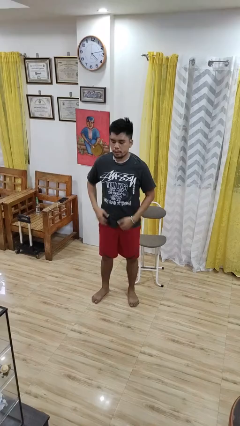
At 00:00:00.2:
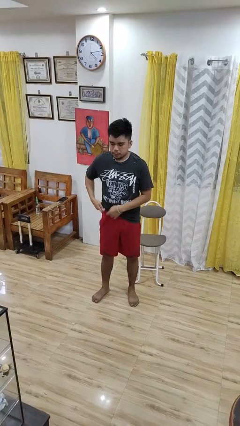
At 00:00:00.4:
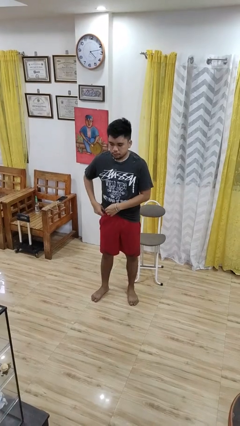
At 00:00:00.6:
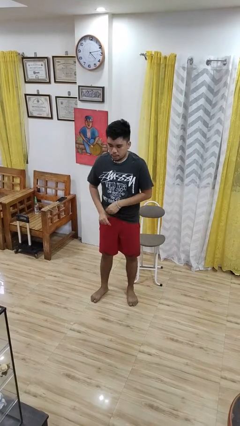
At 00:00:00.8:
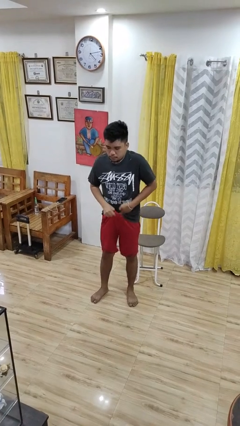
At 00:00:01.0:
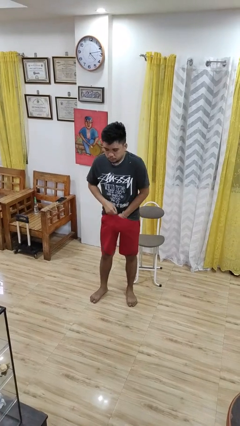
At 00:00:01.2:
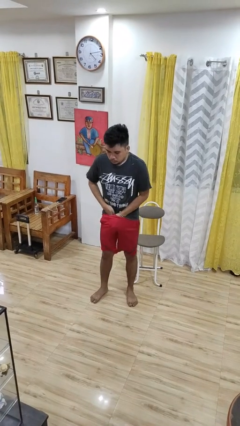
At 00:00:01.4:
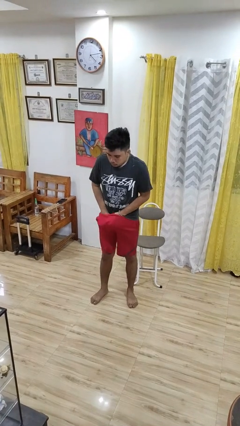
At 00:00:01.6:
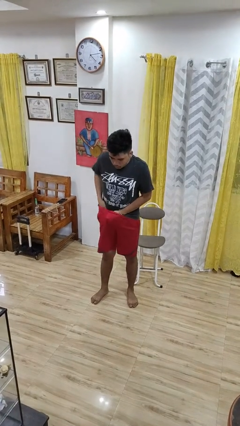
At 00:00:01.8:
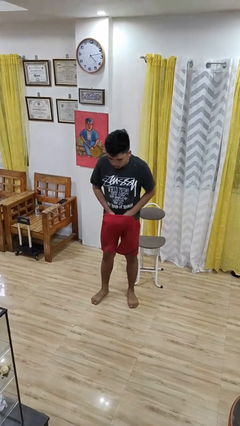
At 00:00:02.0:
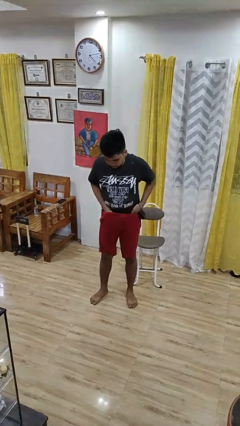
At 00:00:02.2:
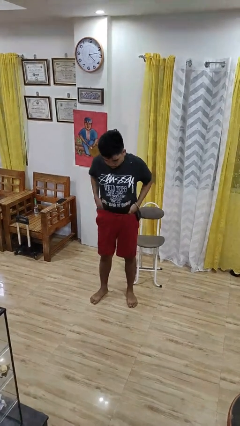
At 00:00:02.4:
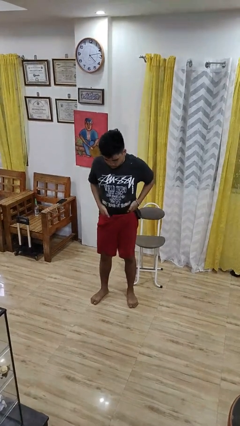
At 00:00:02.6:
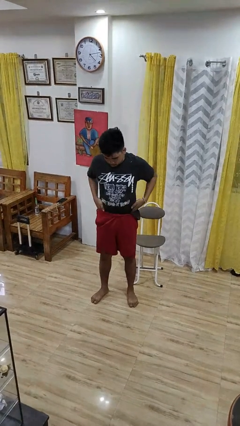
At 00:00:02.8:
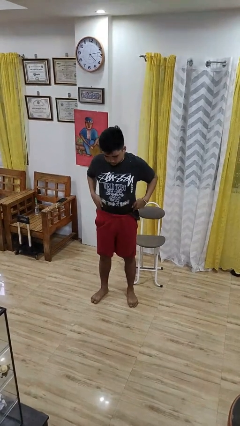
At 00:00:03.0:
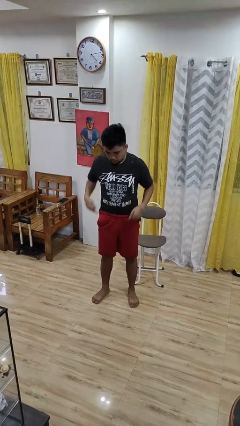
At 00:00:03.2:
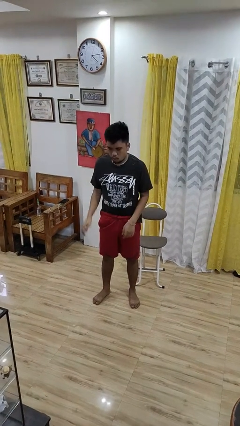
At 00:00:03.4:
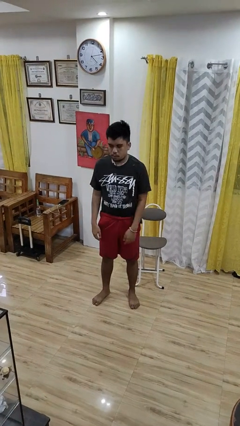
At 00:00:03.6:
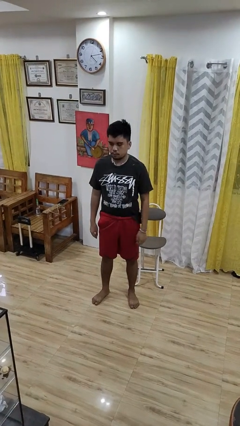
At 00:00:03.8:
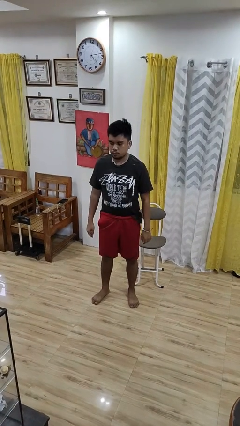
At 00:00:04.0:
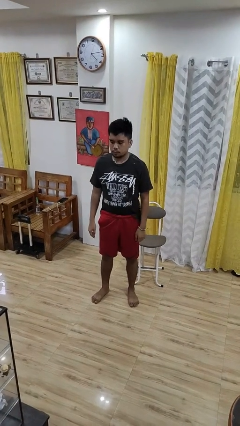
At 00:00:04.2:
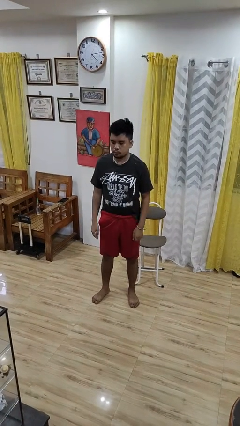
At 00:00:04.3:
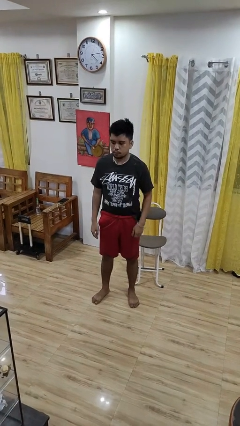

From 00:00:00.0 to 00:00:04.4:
person tucks in shirt

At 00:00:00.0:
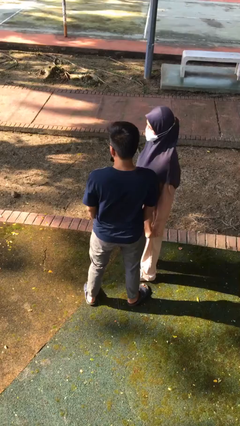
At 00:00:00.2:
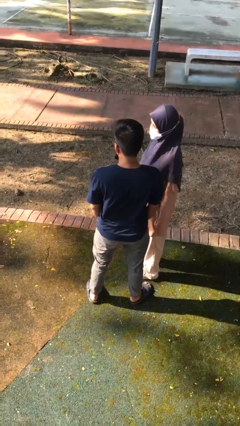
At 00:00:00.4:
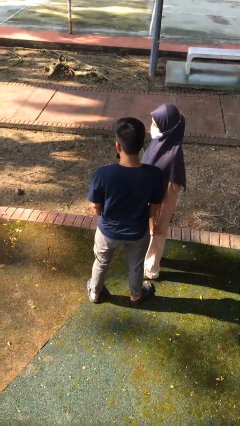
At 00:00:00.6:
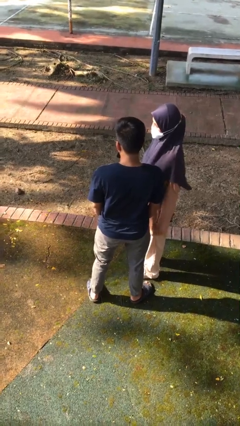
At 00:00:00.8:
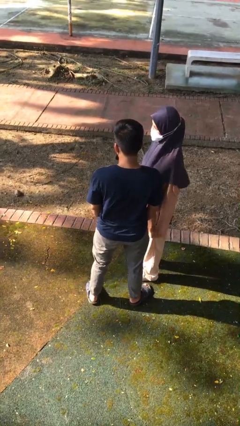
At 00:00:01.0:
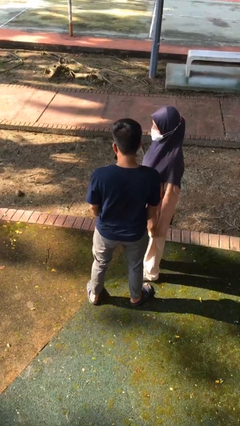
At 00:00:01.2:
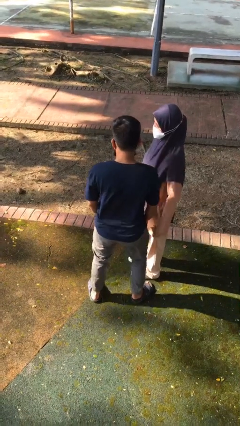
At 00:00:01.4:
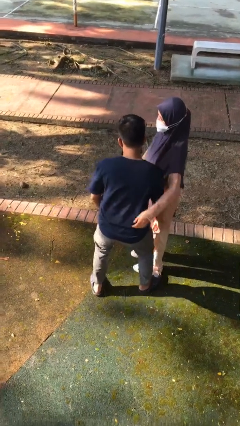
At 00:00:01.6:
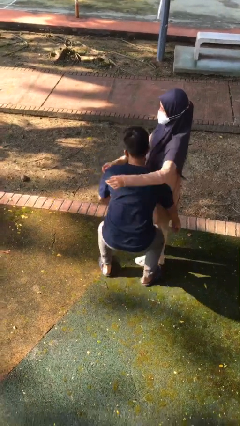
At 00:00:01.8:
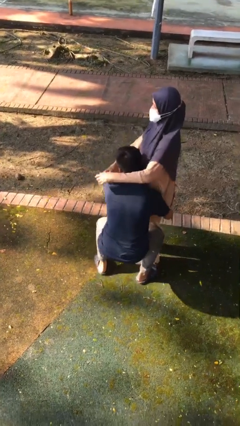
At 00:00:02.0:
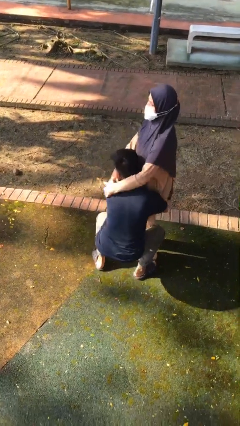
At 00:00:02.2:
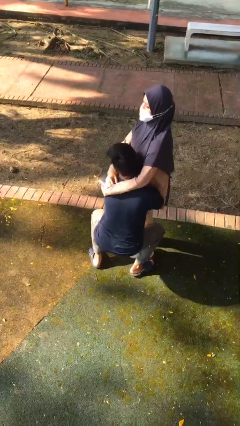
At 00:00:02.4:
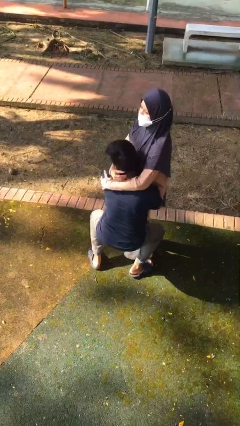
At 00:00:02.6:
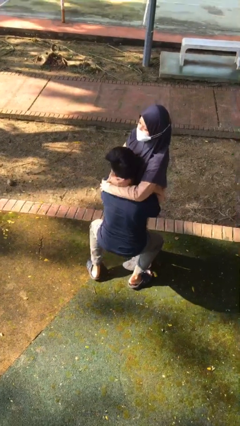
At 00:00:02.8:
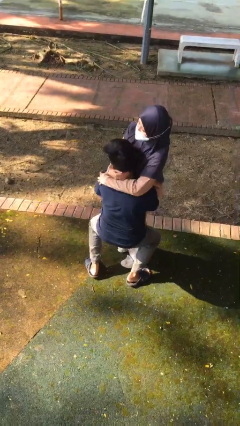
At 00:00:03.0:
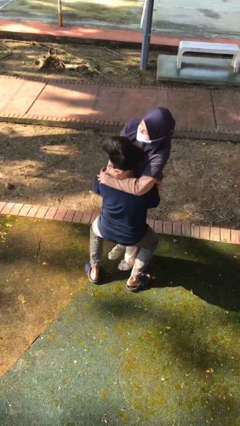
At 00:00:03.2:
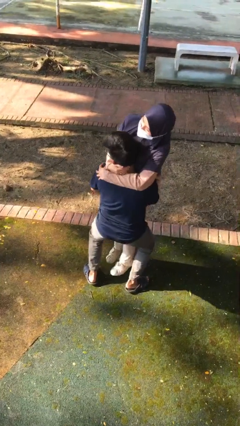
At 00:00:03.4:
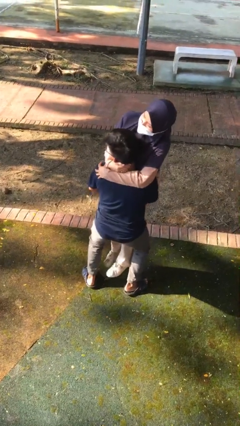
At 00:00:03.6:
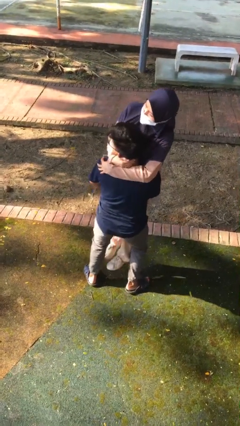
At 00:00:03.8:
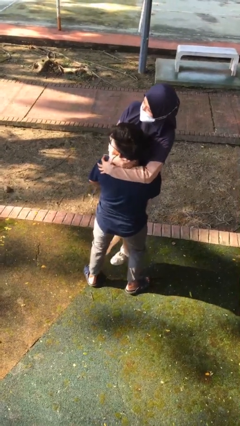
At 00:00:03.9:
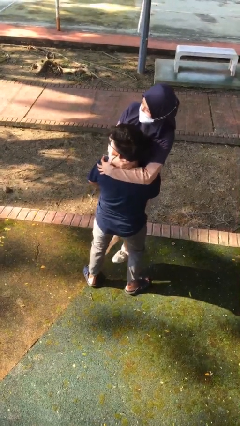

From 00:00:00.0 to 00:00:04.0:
person picks up person

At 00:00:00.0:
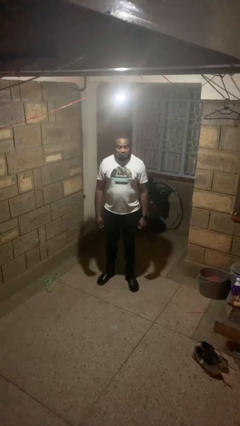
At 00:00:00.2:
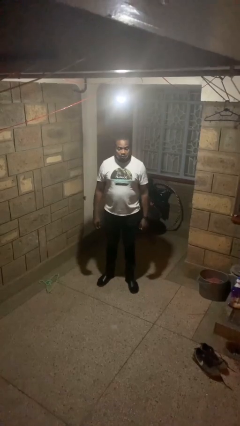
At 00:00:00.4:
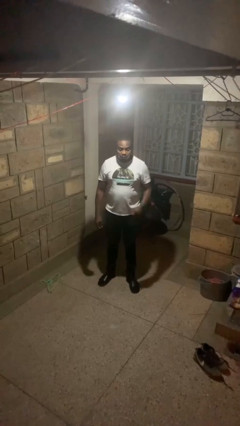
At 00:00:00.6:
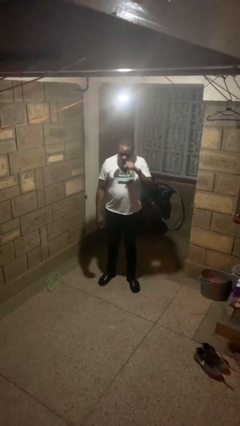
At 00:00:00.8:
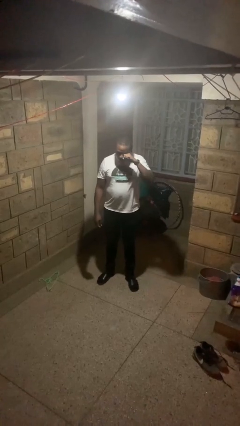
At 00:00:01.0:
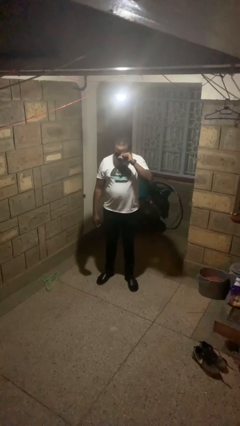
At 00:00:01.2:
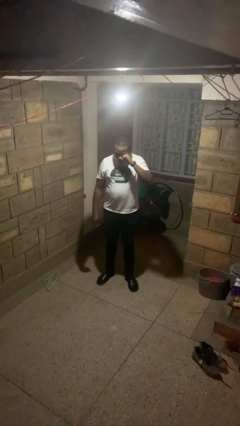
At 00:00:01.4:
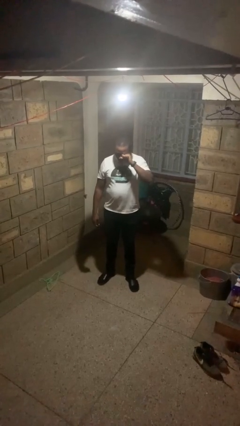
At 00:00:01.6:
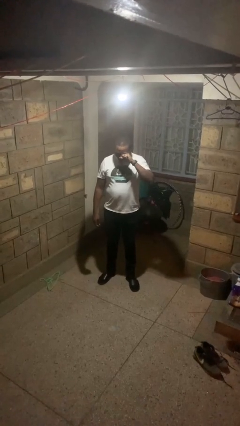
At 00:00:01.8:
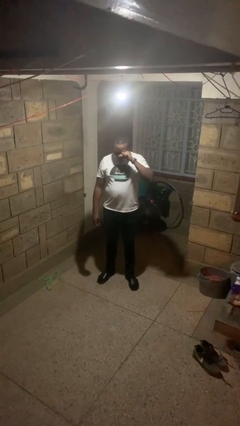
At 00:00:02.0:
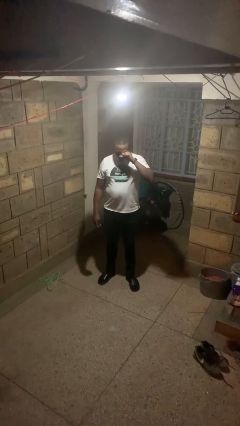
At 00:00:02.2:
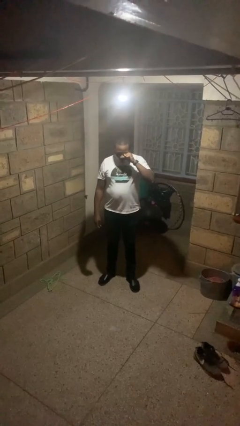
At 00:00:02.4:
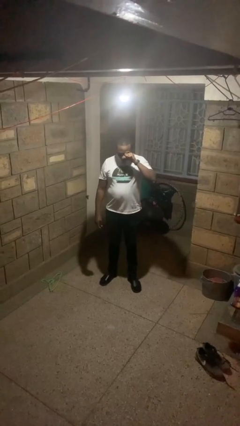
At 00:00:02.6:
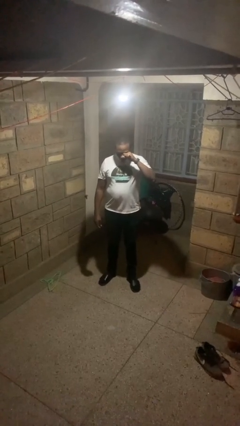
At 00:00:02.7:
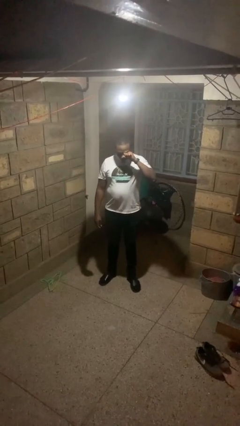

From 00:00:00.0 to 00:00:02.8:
person rubs eyes

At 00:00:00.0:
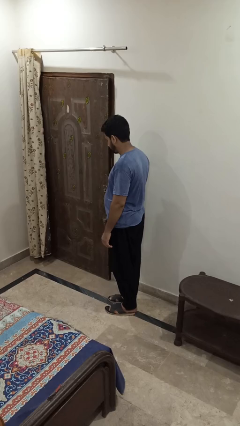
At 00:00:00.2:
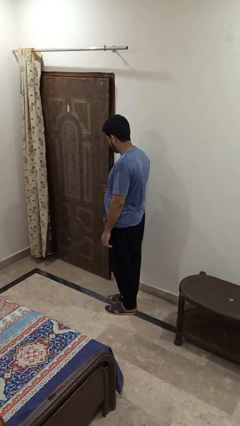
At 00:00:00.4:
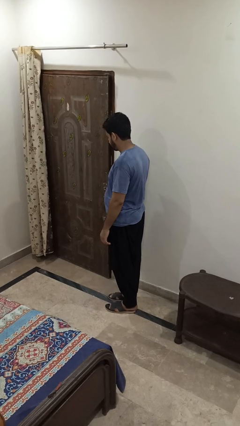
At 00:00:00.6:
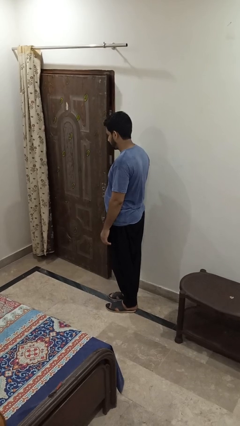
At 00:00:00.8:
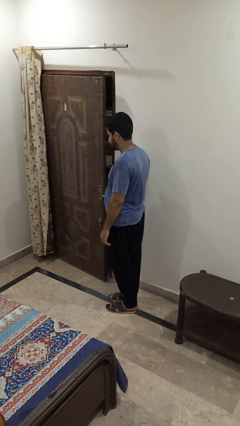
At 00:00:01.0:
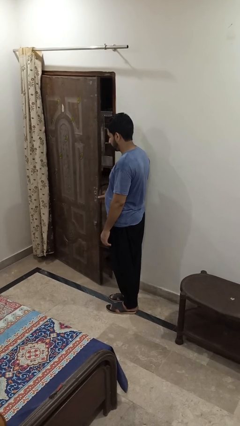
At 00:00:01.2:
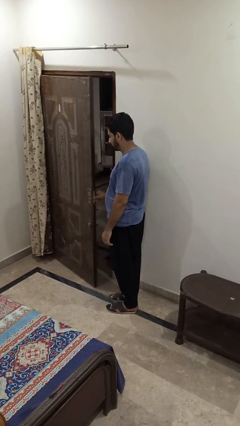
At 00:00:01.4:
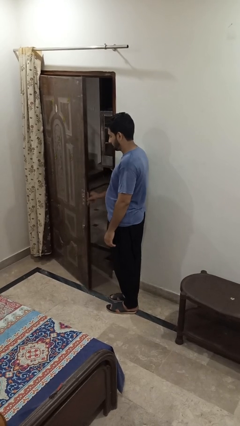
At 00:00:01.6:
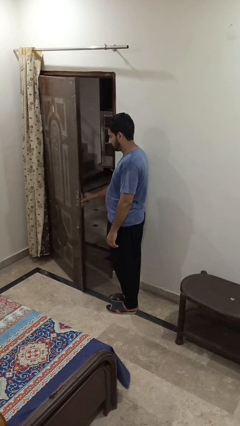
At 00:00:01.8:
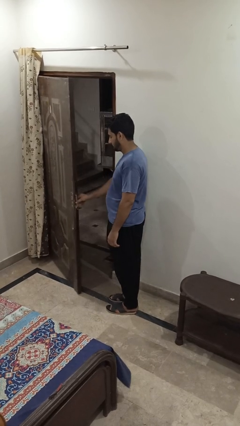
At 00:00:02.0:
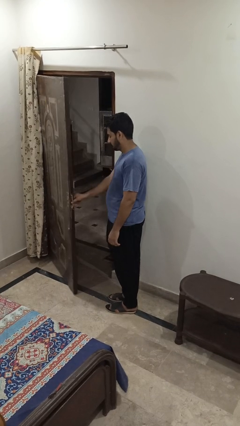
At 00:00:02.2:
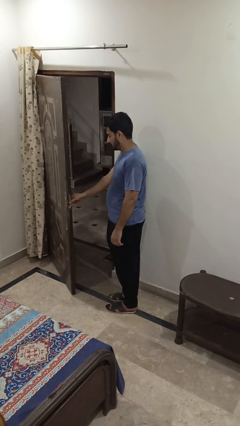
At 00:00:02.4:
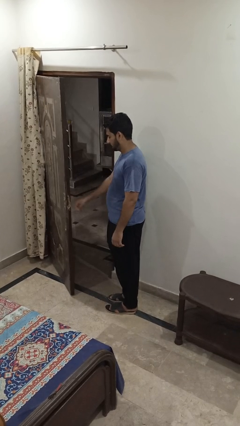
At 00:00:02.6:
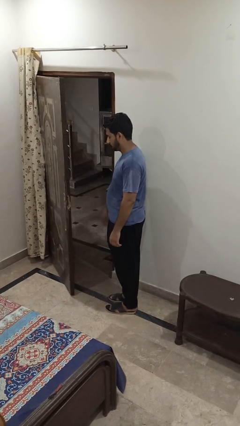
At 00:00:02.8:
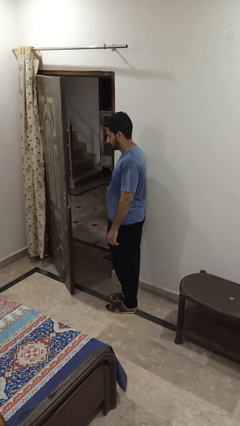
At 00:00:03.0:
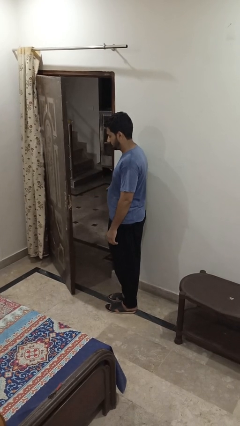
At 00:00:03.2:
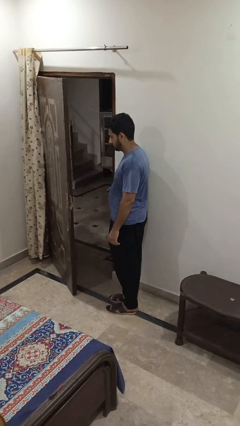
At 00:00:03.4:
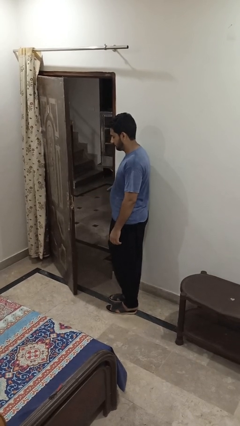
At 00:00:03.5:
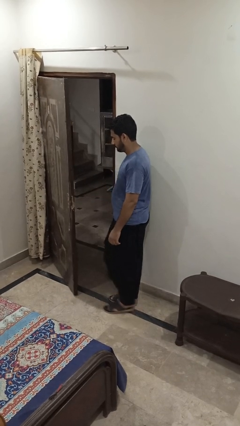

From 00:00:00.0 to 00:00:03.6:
person opens facility door

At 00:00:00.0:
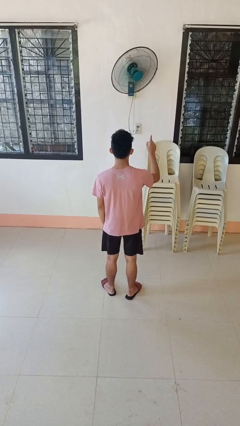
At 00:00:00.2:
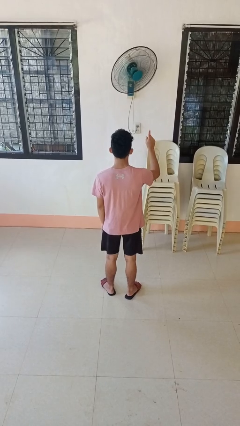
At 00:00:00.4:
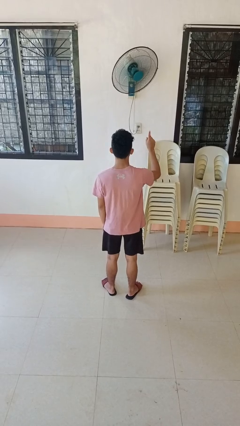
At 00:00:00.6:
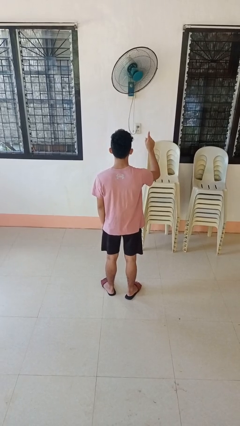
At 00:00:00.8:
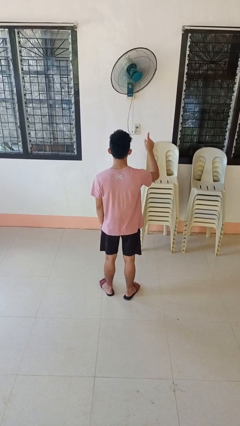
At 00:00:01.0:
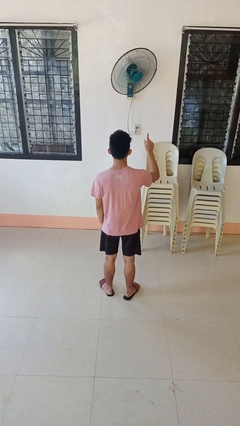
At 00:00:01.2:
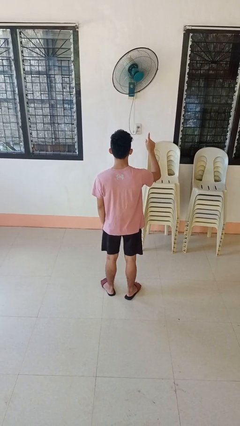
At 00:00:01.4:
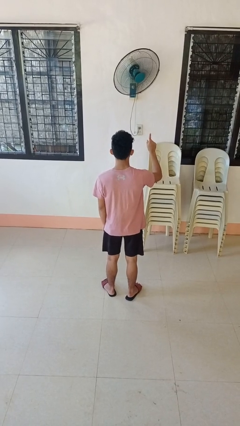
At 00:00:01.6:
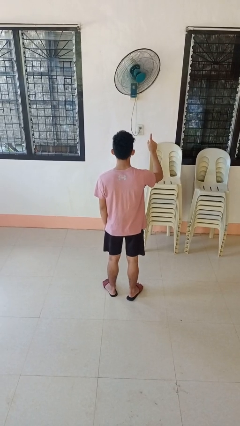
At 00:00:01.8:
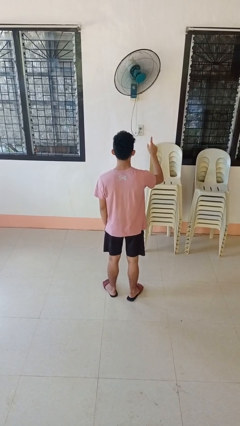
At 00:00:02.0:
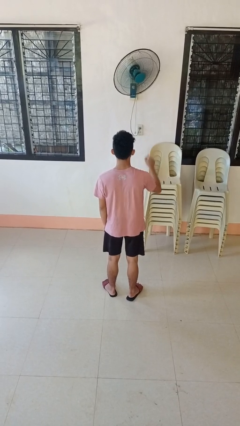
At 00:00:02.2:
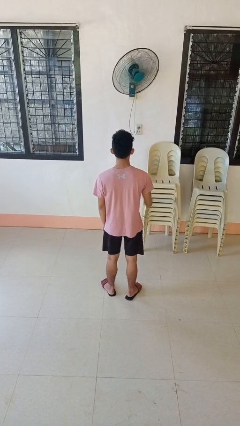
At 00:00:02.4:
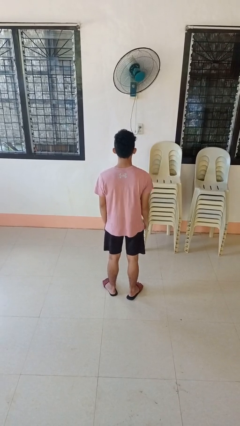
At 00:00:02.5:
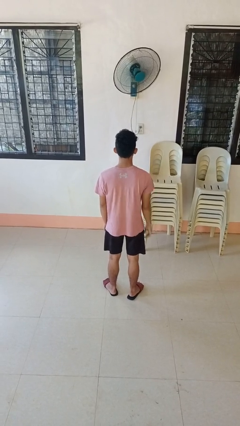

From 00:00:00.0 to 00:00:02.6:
person gestures number one
